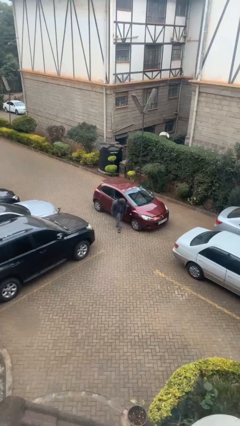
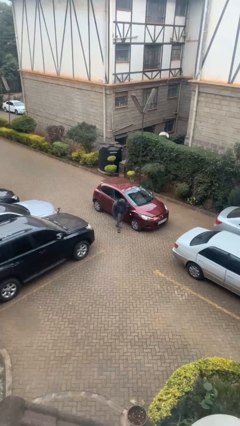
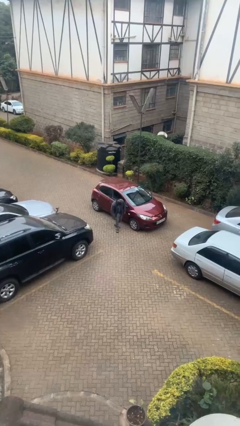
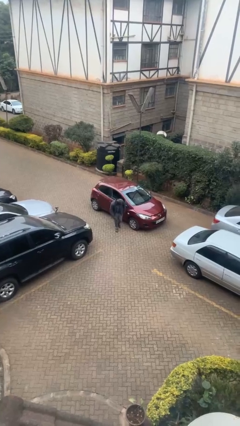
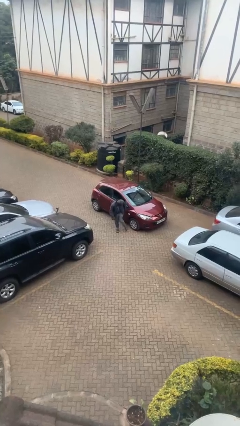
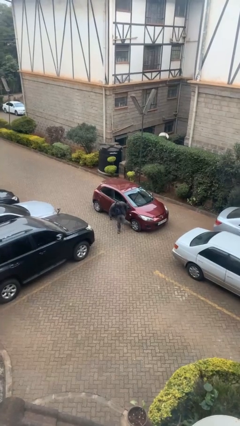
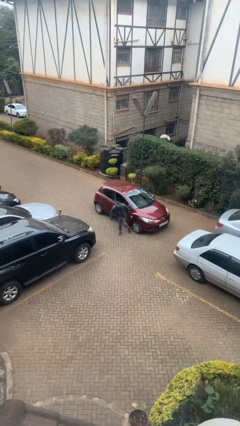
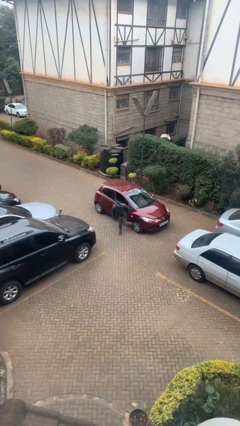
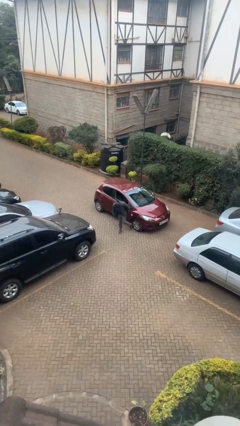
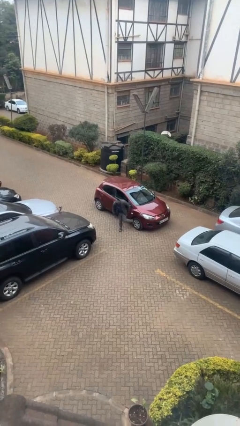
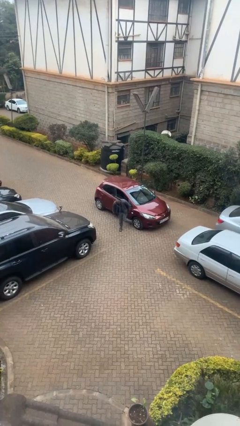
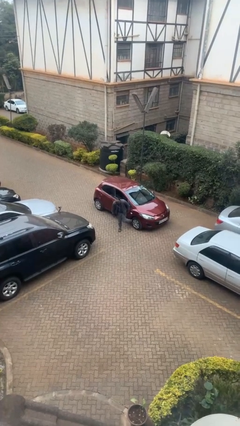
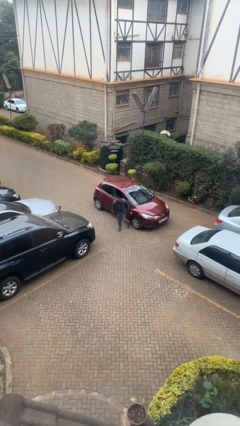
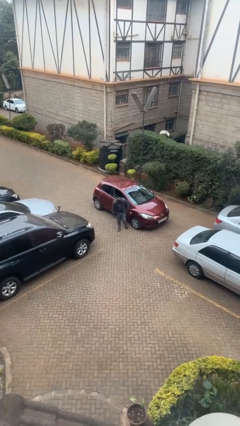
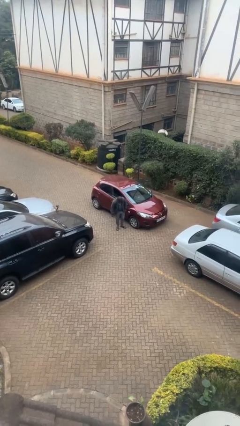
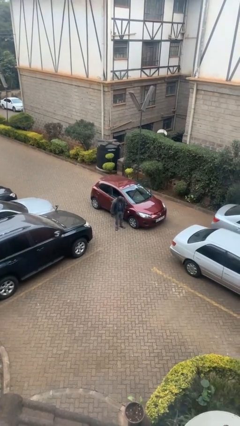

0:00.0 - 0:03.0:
person kicks car tires

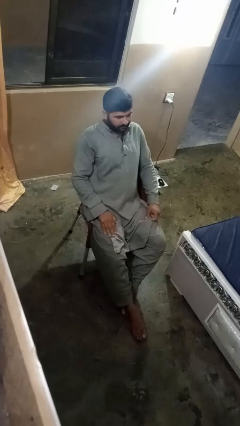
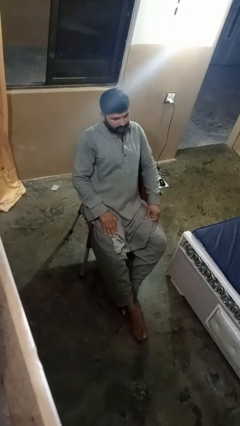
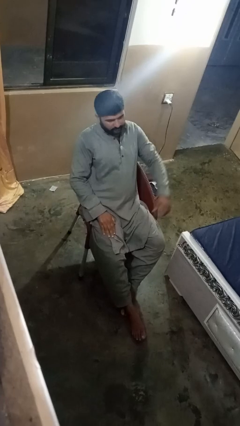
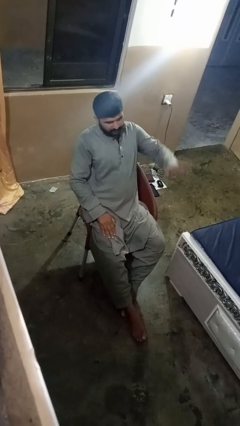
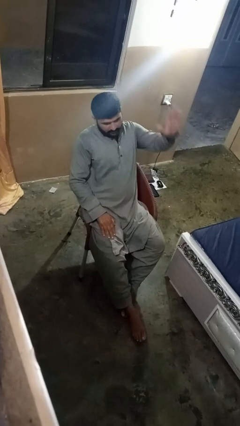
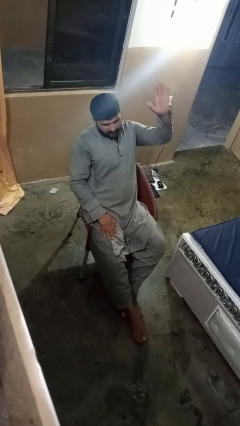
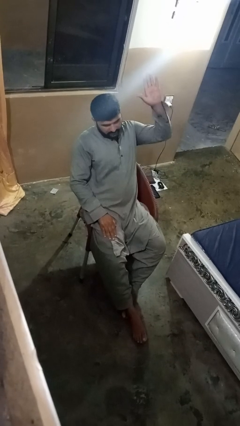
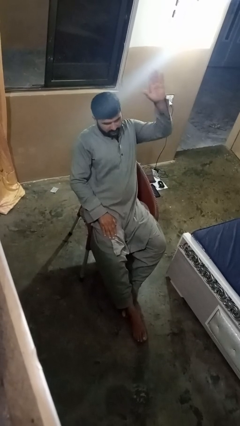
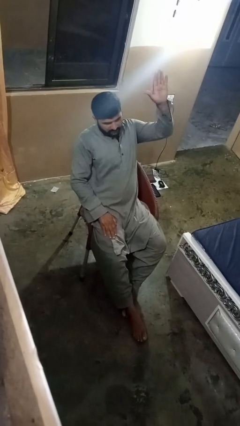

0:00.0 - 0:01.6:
person gestures number five

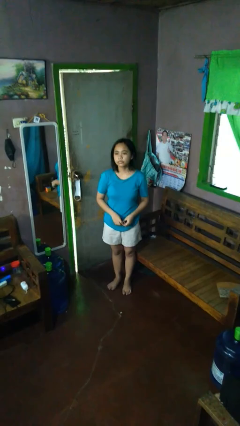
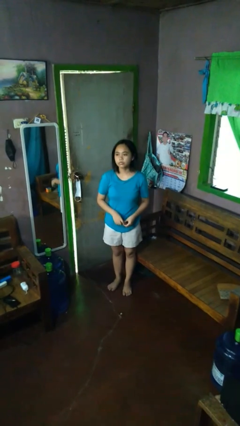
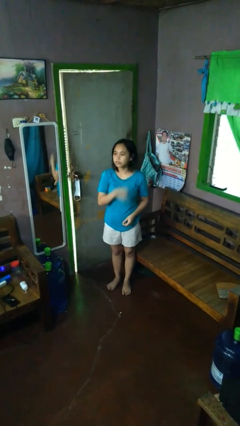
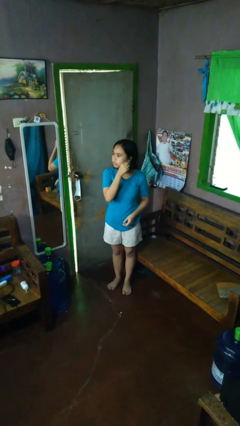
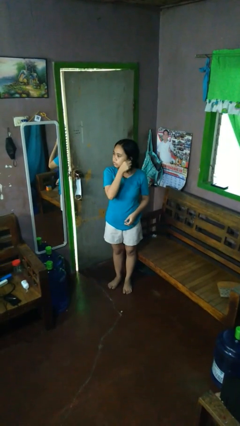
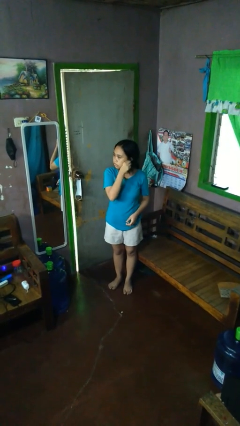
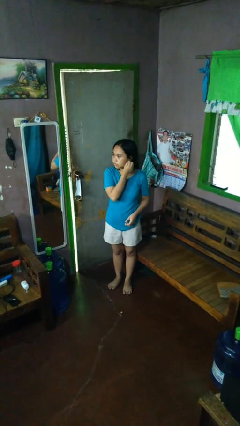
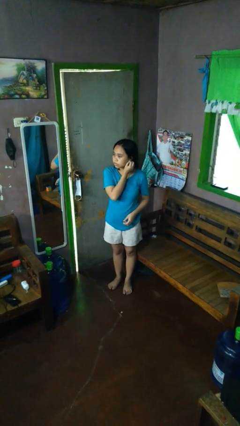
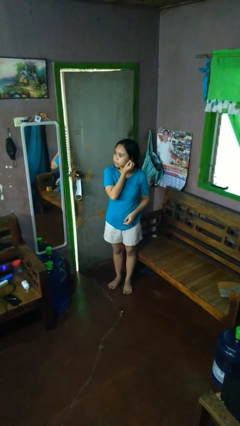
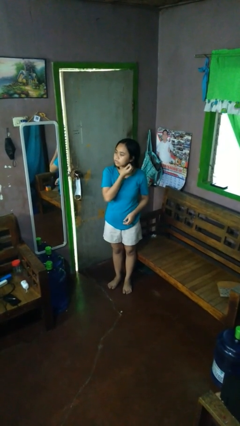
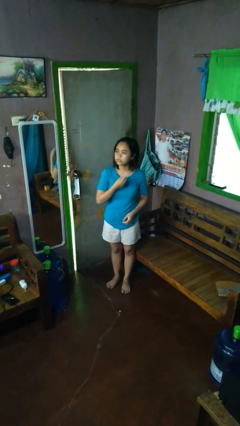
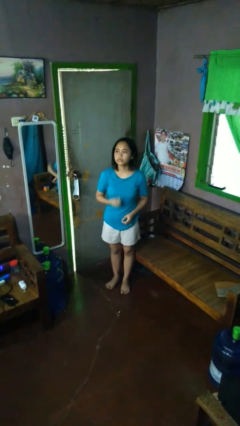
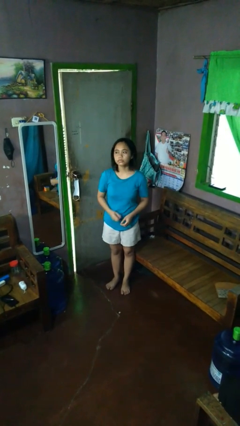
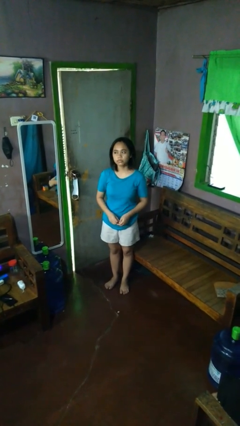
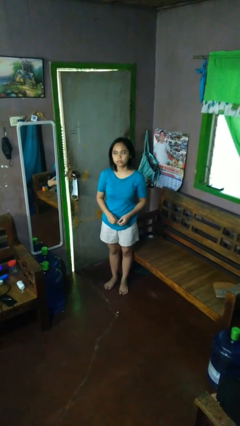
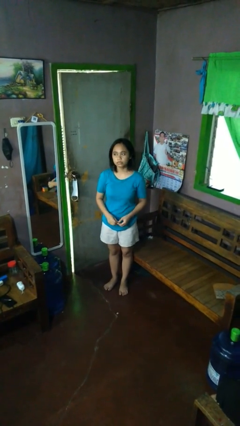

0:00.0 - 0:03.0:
person takes off earrings

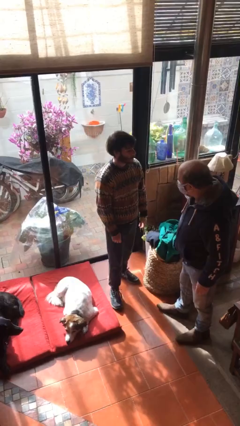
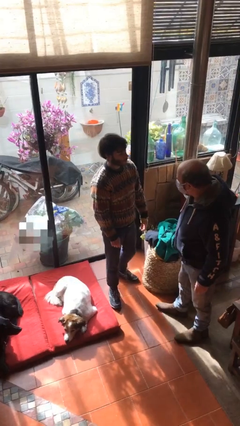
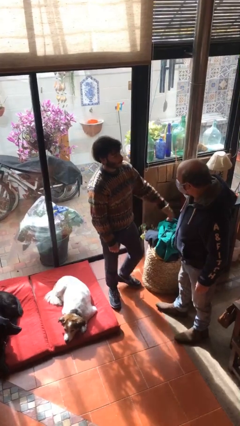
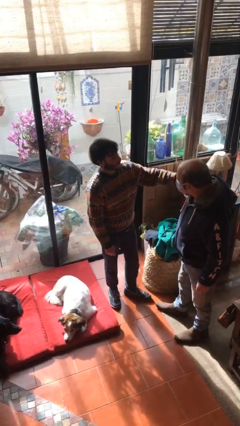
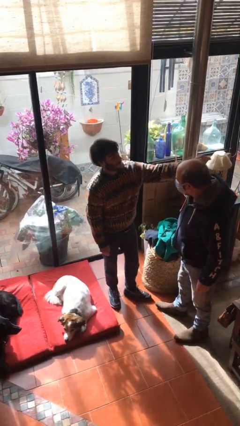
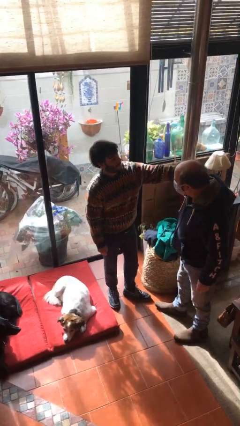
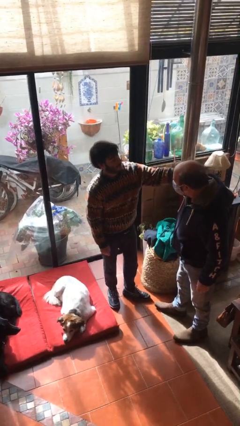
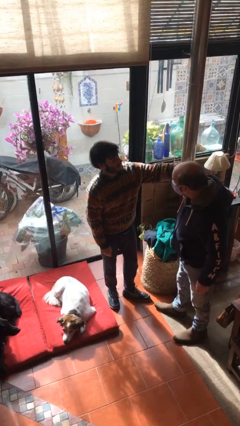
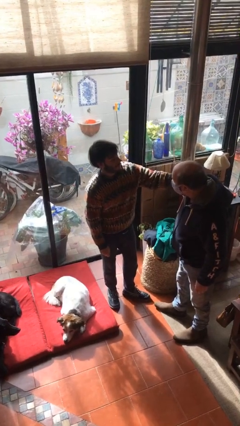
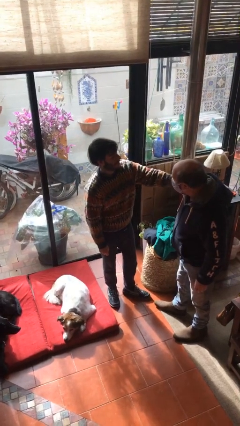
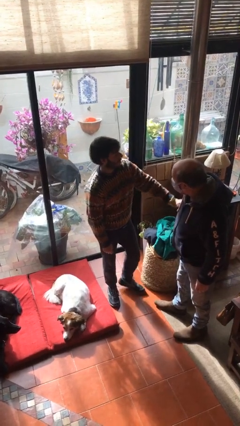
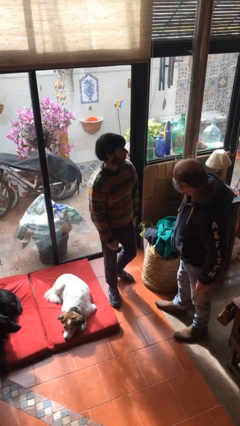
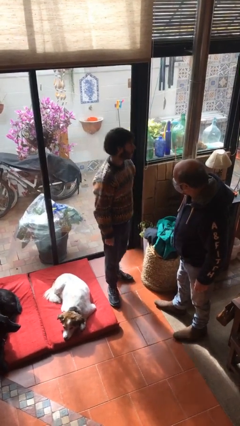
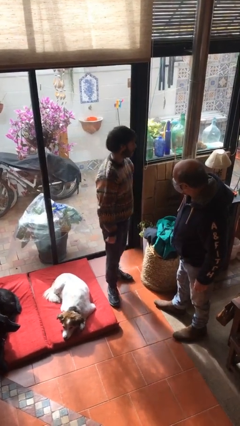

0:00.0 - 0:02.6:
person pounds shoulders of person

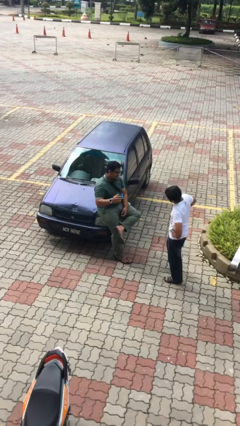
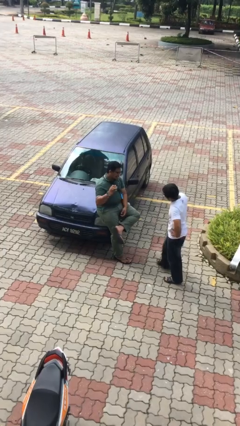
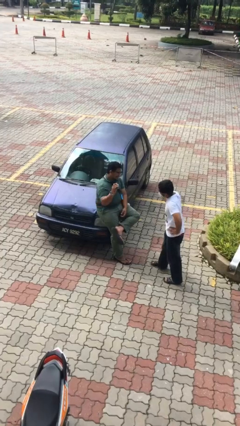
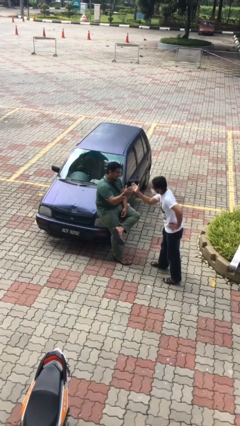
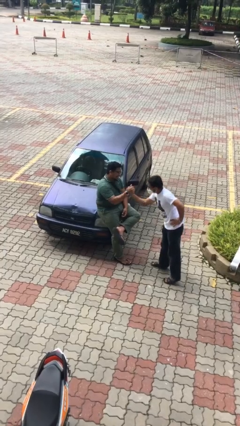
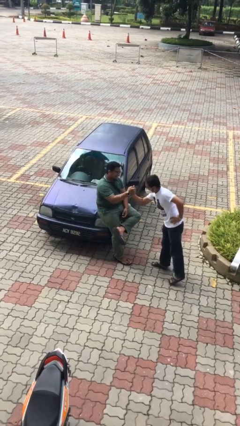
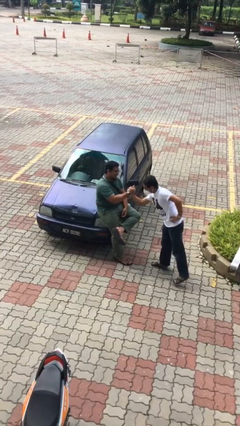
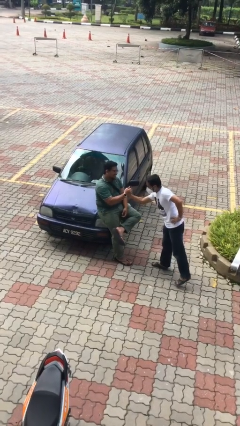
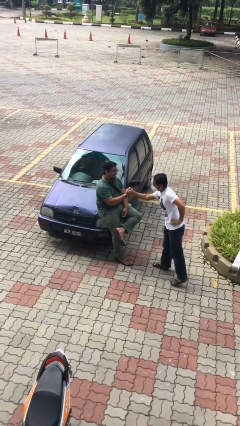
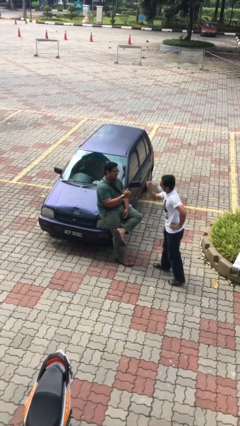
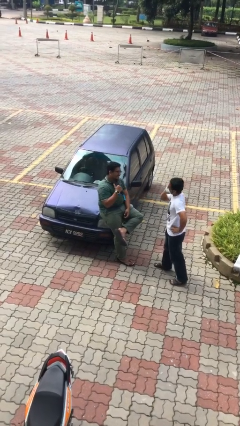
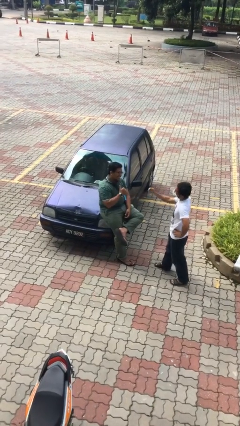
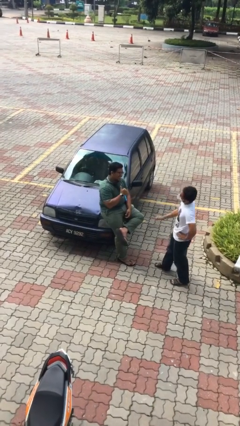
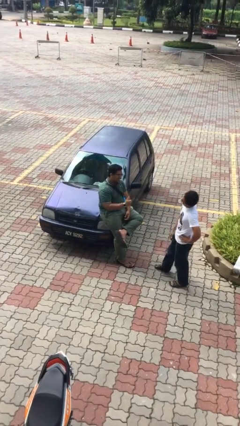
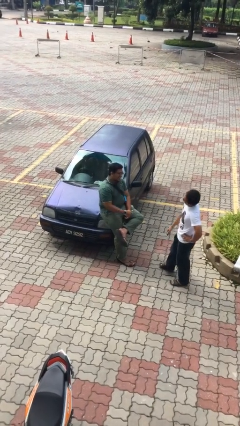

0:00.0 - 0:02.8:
person shakes hand

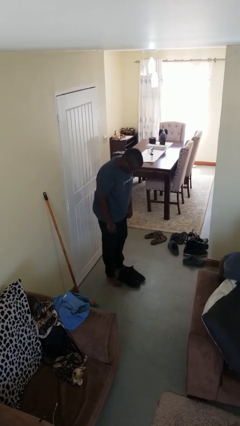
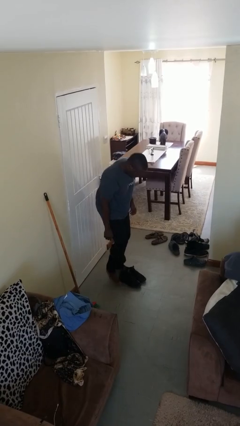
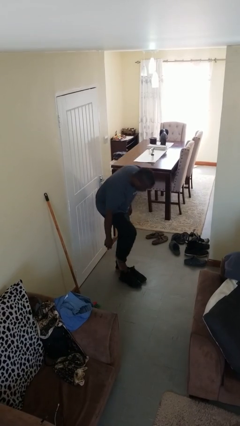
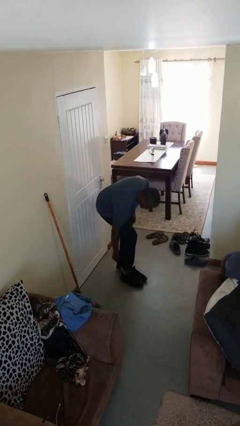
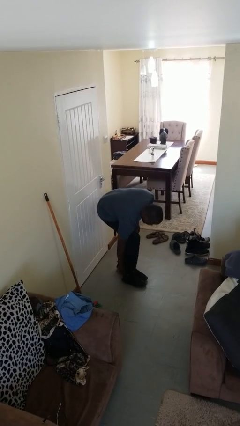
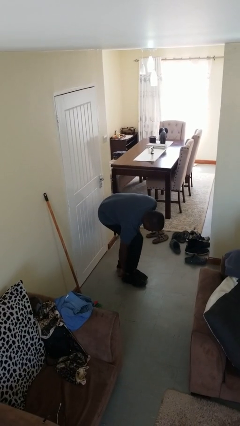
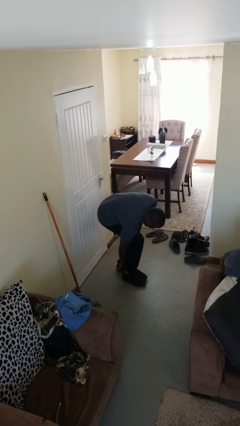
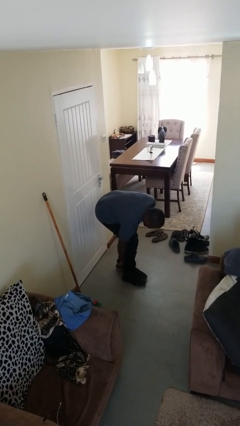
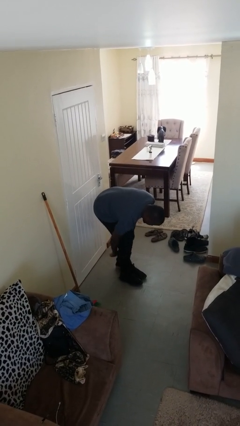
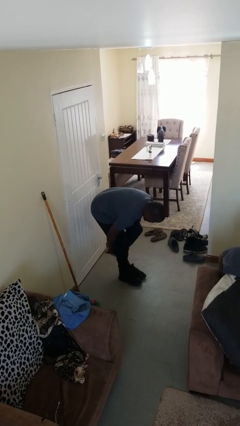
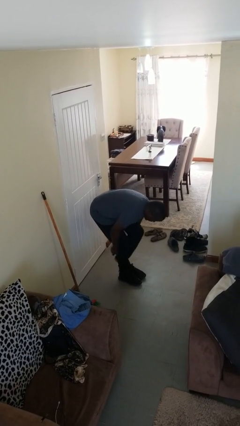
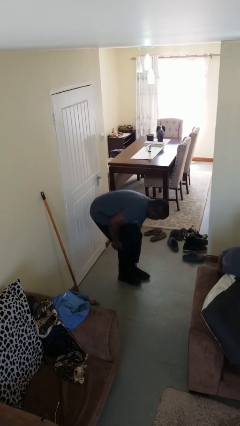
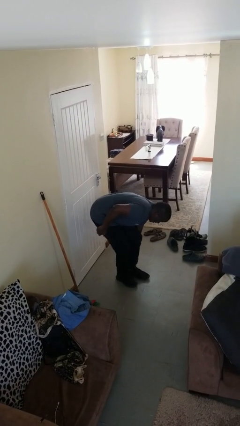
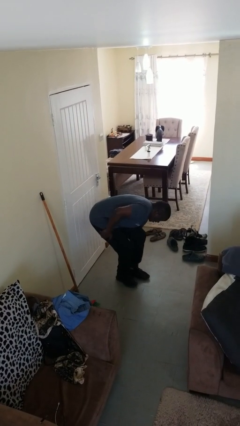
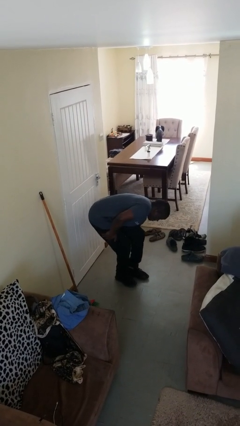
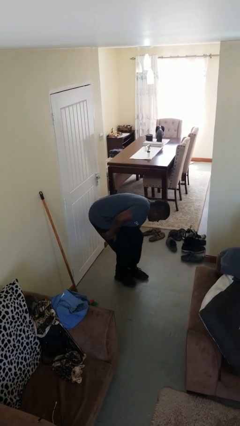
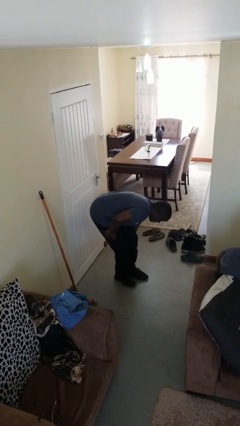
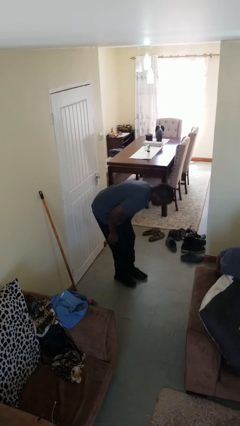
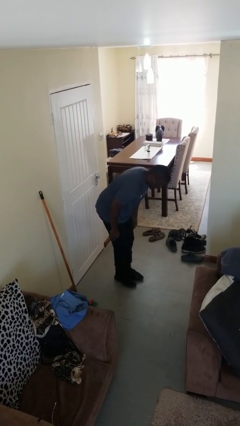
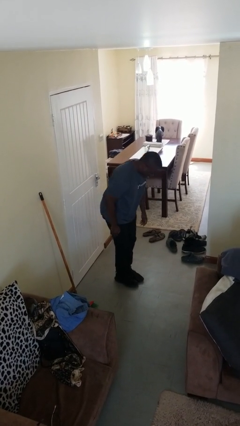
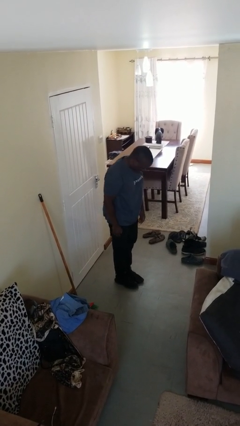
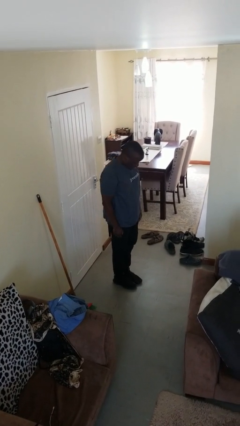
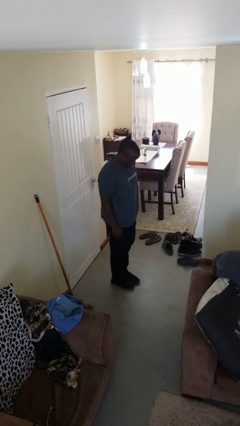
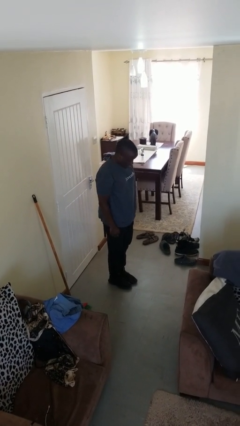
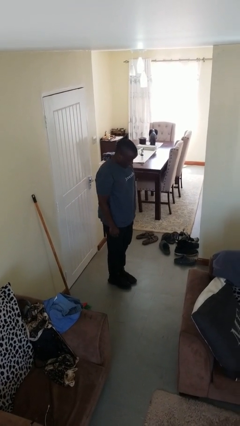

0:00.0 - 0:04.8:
person puts on shoes
